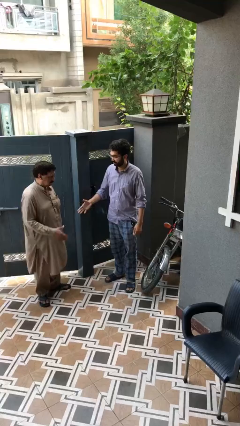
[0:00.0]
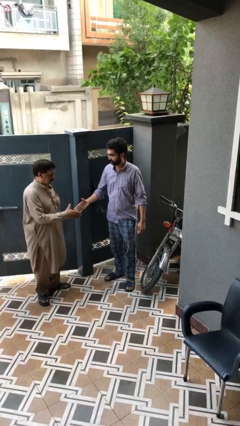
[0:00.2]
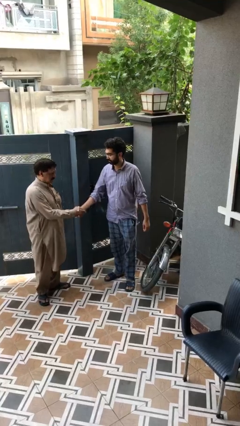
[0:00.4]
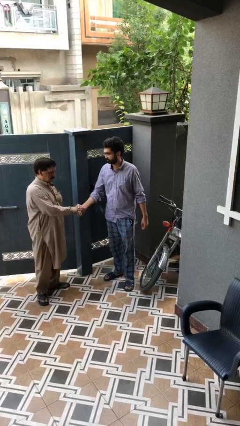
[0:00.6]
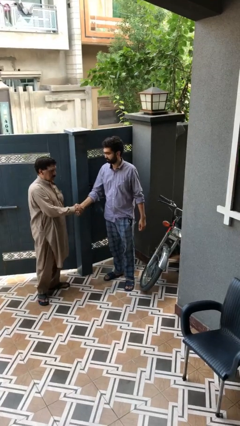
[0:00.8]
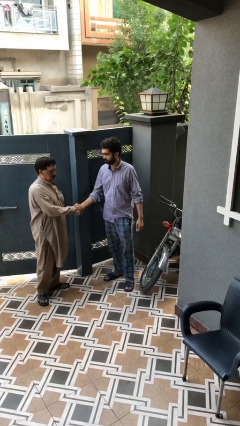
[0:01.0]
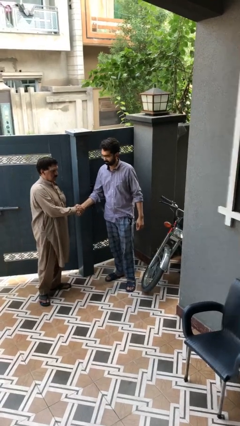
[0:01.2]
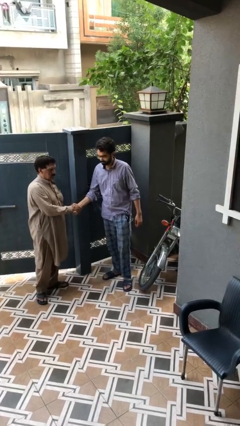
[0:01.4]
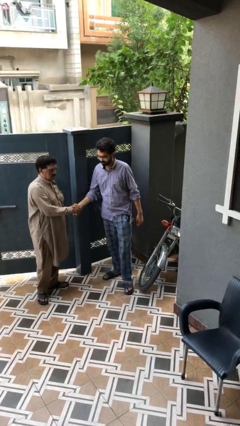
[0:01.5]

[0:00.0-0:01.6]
person shakes hand

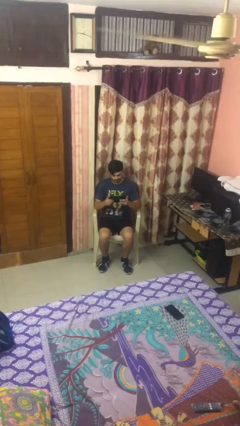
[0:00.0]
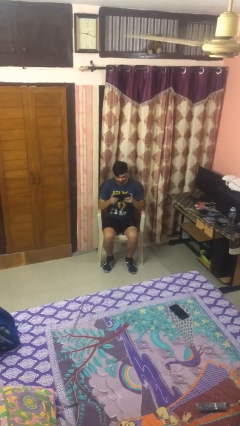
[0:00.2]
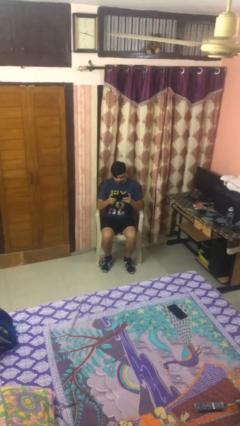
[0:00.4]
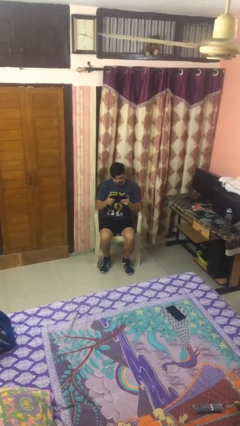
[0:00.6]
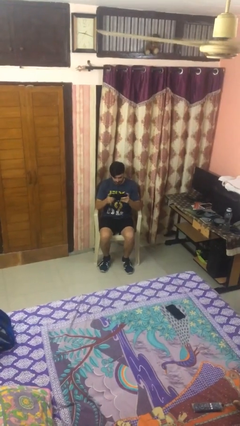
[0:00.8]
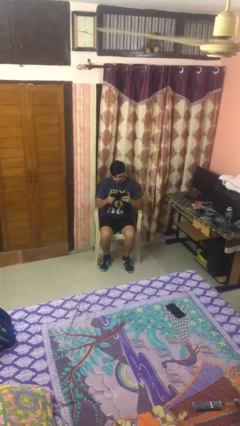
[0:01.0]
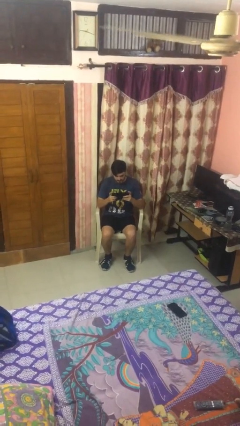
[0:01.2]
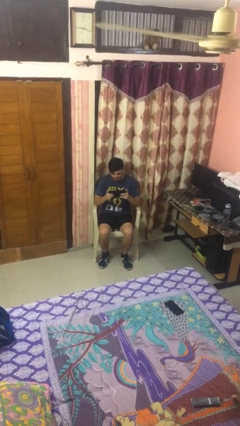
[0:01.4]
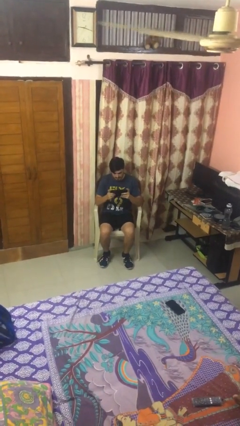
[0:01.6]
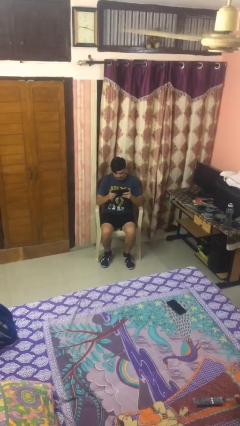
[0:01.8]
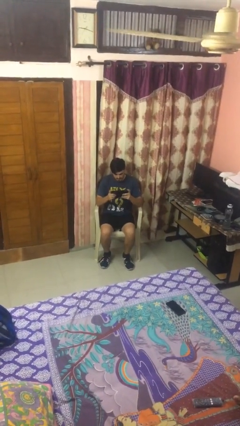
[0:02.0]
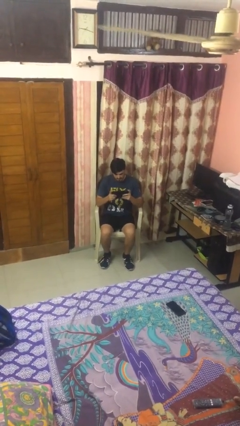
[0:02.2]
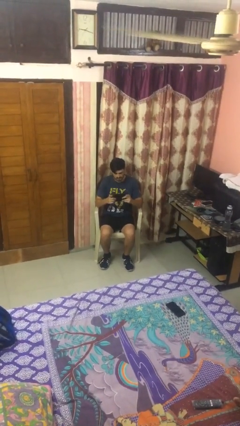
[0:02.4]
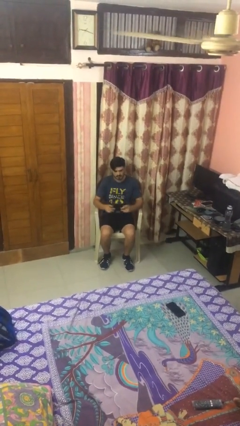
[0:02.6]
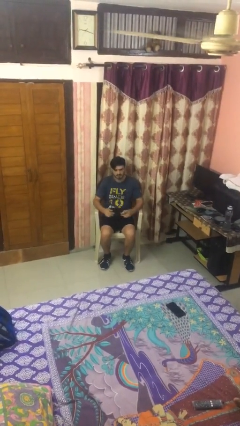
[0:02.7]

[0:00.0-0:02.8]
person interacts with handheld game

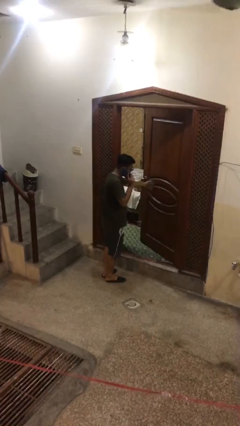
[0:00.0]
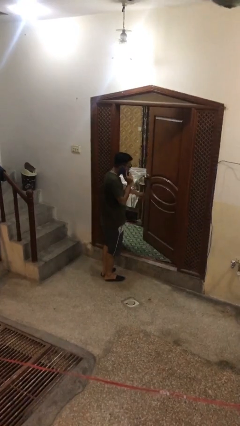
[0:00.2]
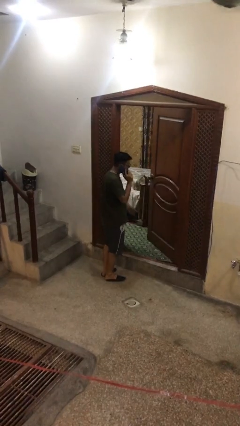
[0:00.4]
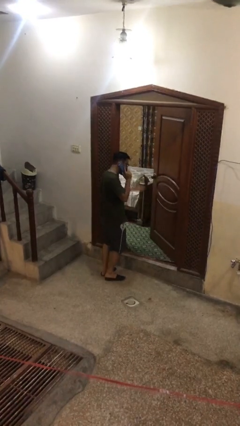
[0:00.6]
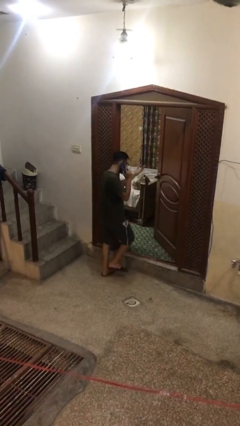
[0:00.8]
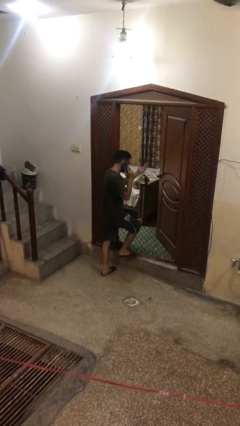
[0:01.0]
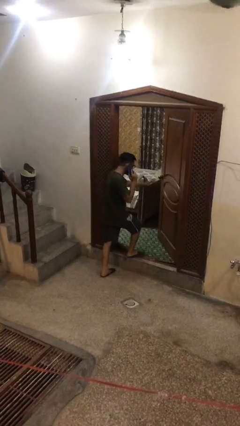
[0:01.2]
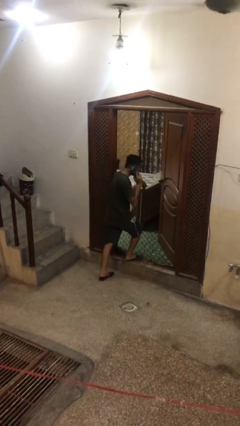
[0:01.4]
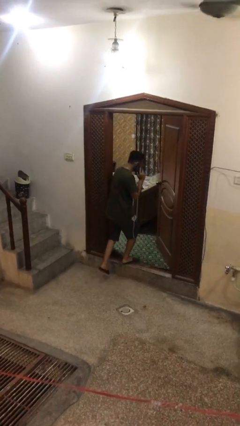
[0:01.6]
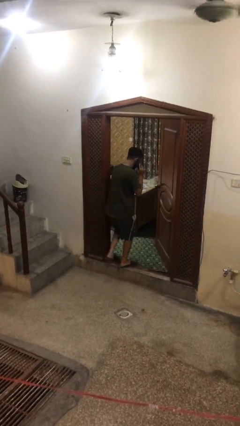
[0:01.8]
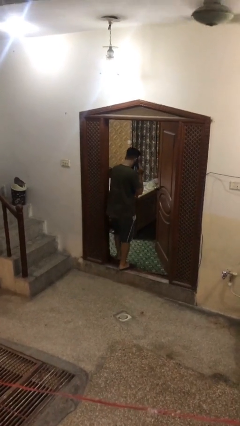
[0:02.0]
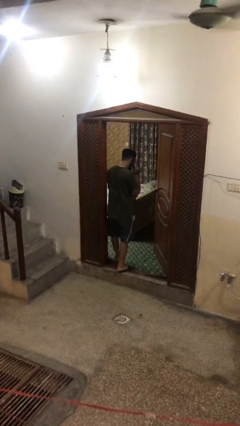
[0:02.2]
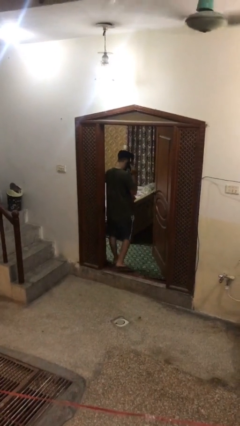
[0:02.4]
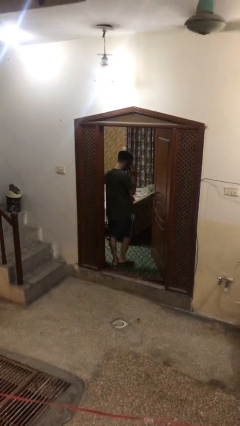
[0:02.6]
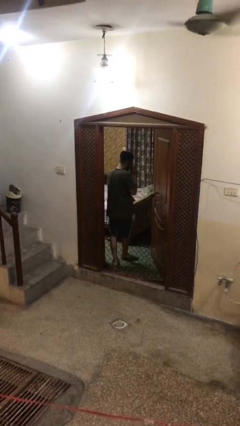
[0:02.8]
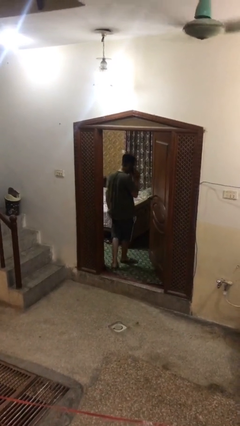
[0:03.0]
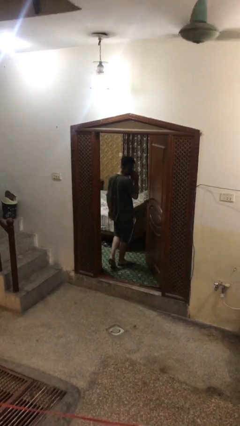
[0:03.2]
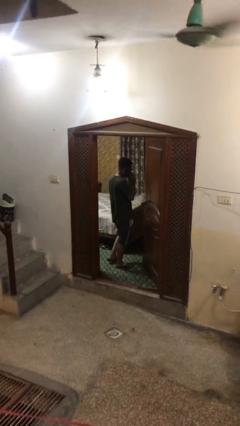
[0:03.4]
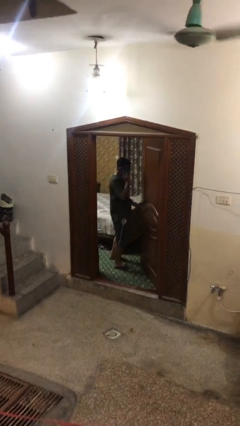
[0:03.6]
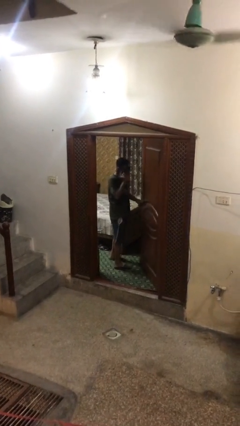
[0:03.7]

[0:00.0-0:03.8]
person exits scene through structure

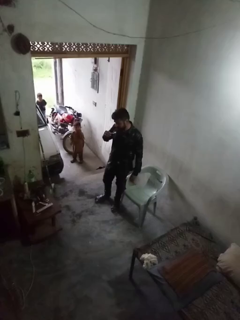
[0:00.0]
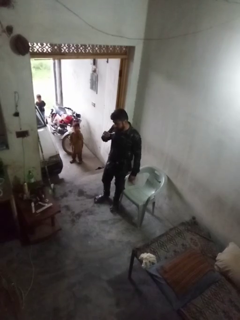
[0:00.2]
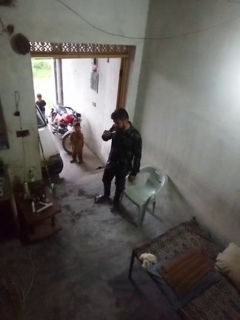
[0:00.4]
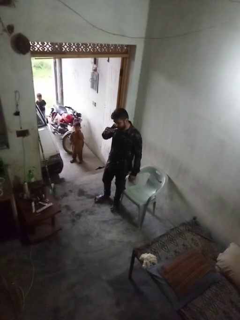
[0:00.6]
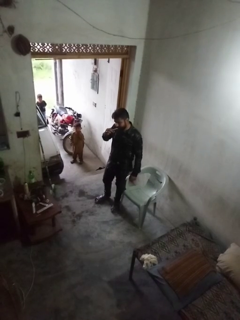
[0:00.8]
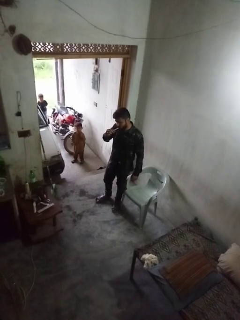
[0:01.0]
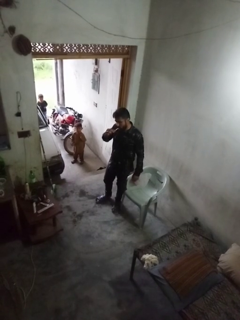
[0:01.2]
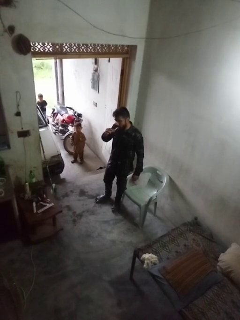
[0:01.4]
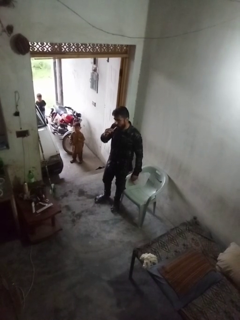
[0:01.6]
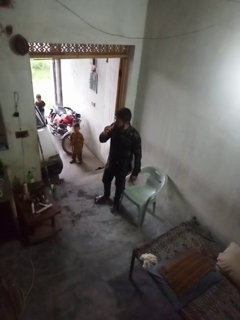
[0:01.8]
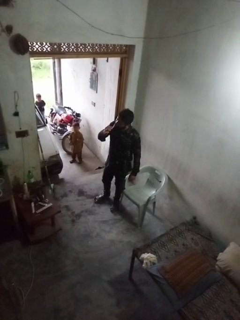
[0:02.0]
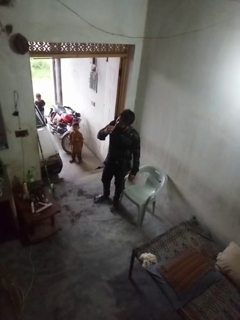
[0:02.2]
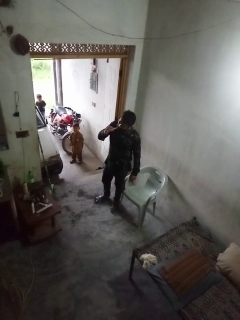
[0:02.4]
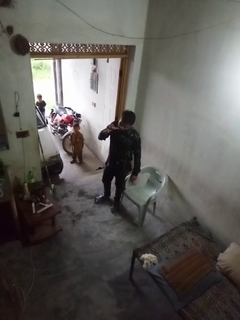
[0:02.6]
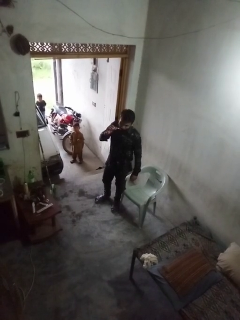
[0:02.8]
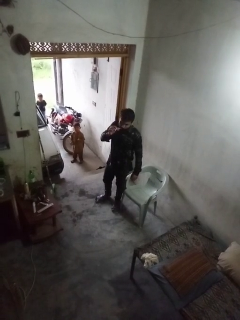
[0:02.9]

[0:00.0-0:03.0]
person brushes teeth

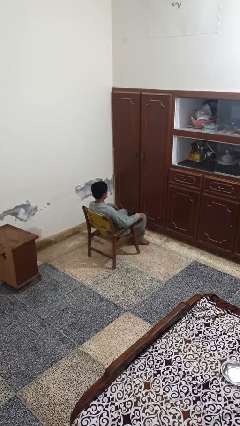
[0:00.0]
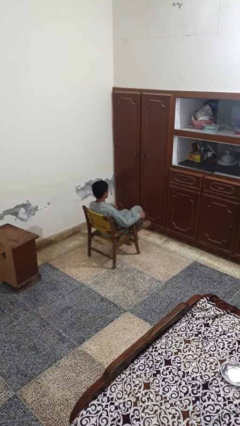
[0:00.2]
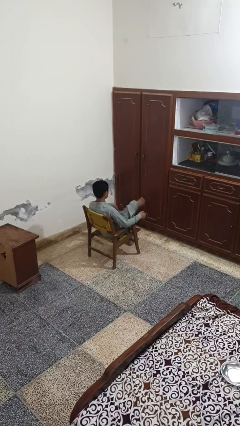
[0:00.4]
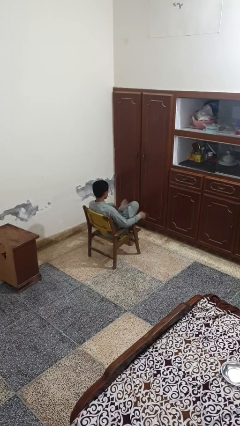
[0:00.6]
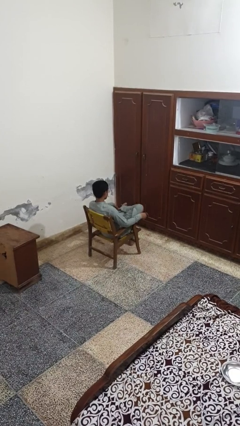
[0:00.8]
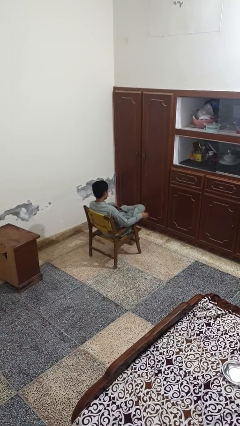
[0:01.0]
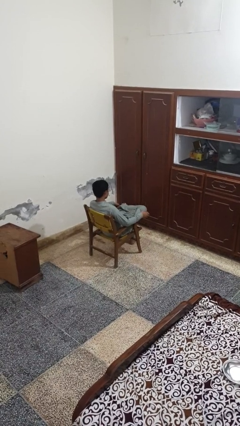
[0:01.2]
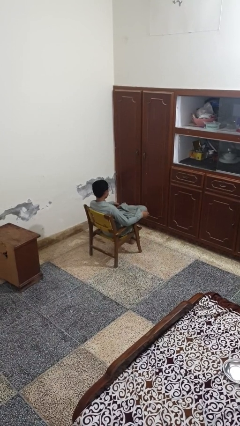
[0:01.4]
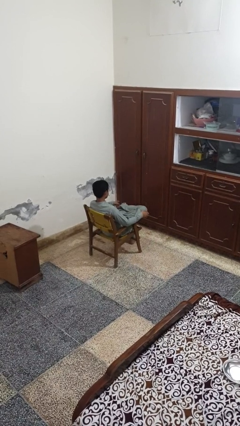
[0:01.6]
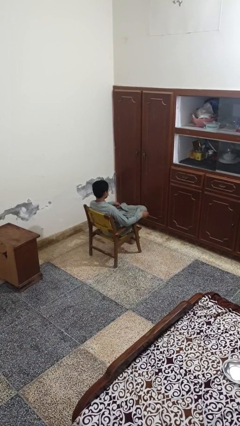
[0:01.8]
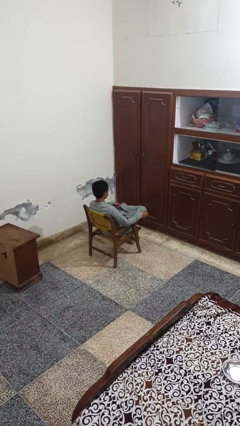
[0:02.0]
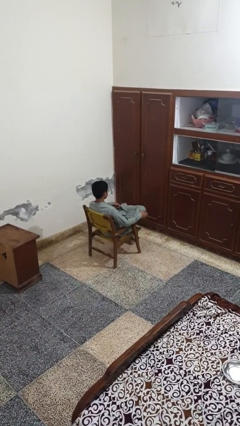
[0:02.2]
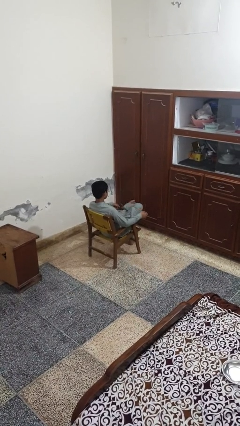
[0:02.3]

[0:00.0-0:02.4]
person crosses legs

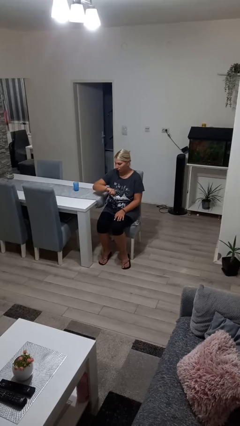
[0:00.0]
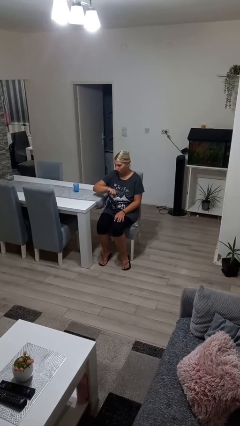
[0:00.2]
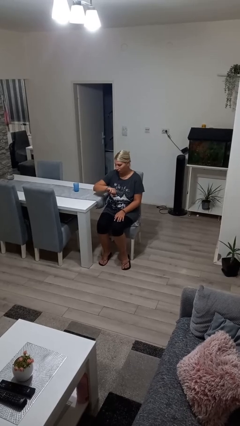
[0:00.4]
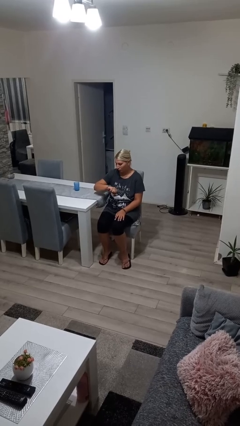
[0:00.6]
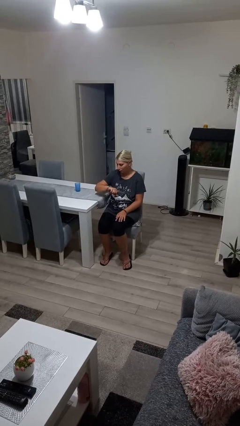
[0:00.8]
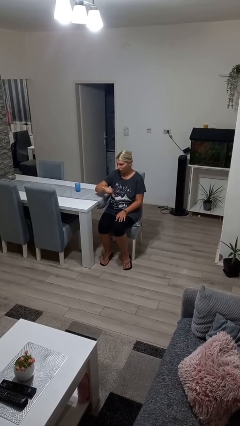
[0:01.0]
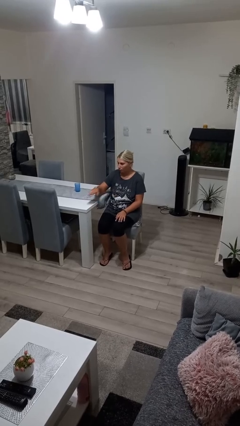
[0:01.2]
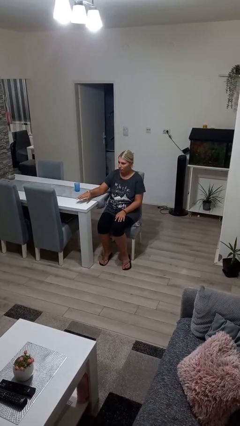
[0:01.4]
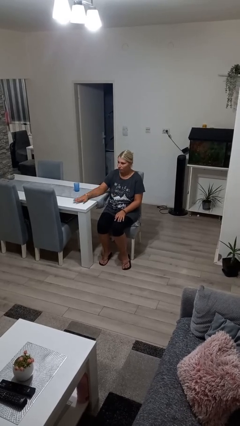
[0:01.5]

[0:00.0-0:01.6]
person looks at wristwatch

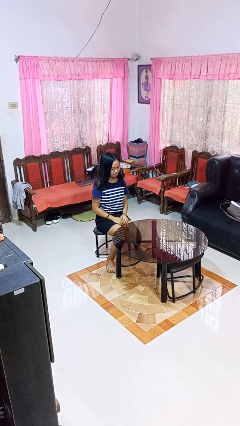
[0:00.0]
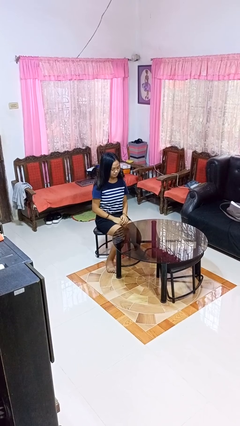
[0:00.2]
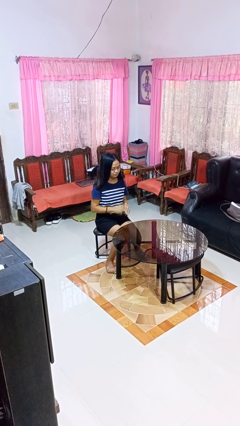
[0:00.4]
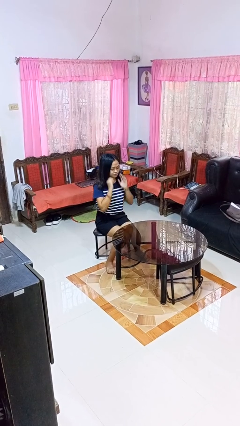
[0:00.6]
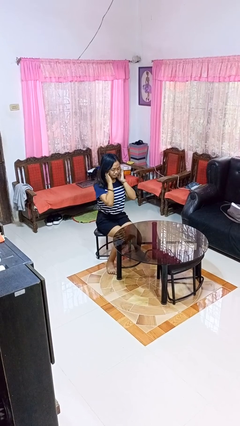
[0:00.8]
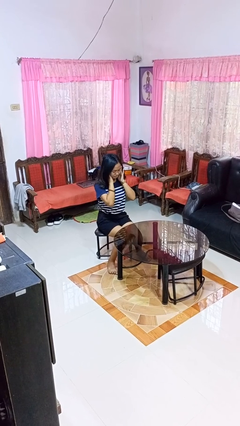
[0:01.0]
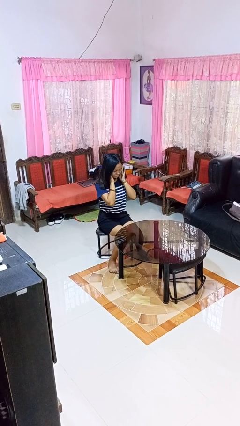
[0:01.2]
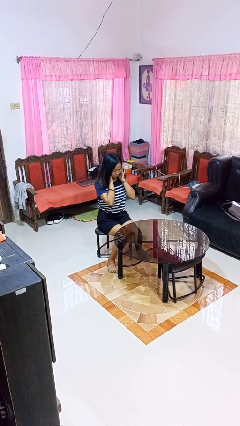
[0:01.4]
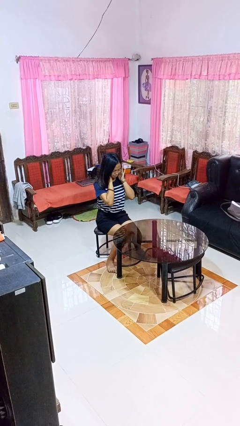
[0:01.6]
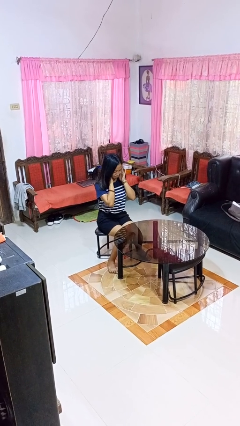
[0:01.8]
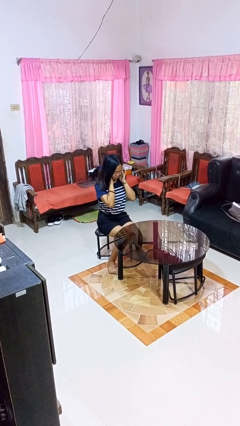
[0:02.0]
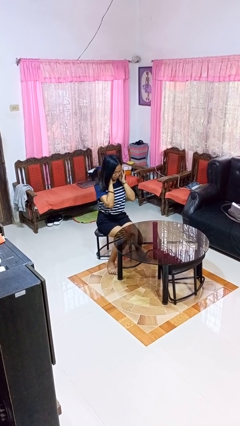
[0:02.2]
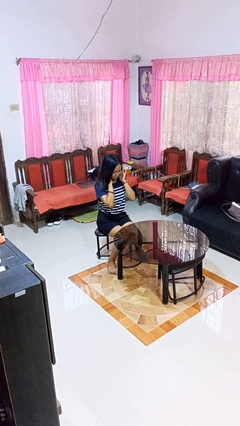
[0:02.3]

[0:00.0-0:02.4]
person puts fingers in ear
